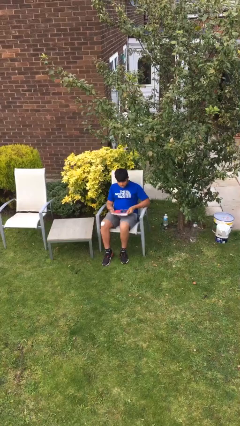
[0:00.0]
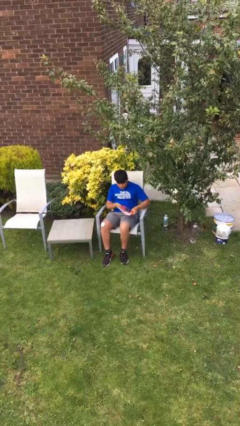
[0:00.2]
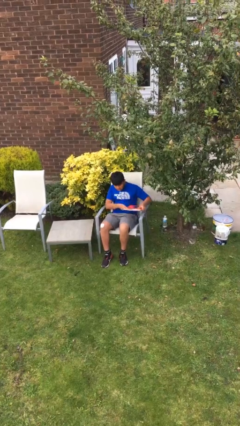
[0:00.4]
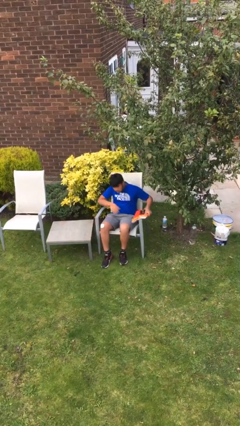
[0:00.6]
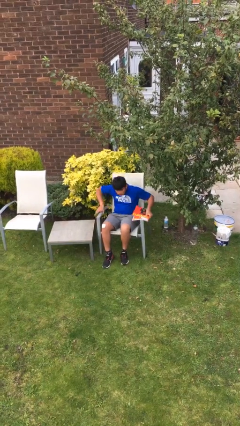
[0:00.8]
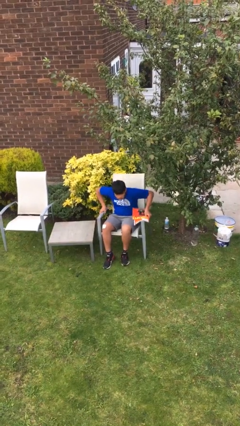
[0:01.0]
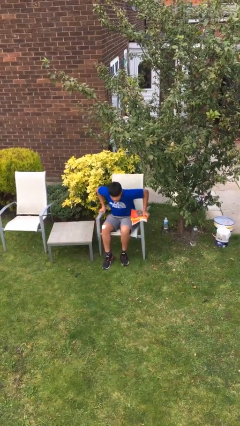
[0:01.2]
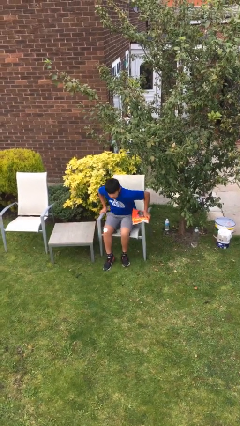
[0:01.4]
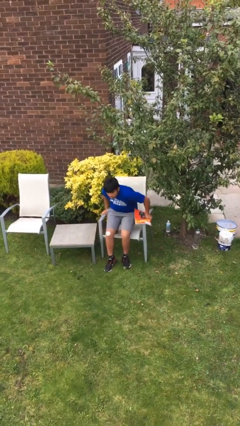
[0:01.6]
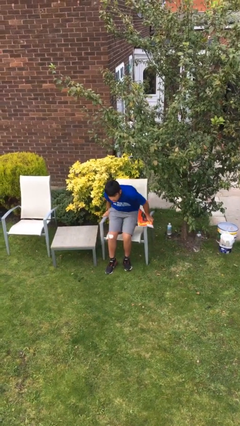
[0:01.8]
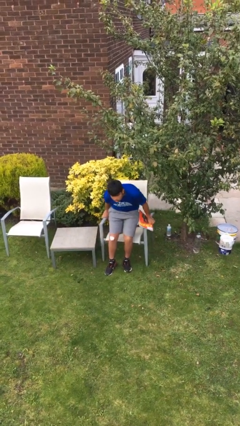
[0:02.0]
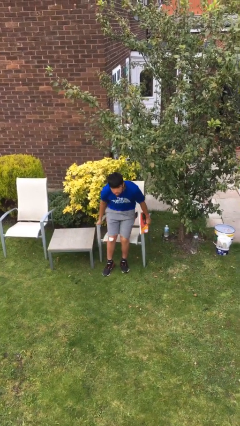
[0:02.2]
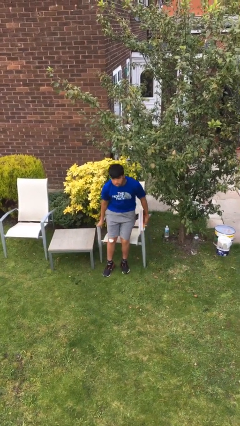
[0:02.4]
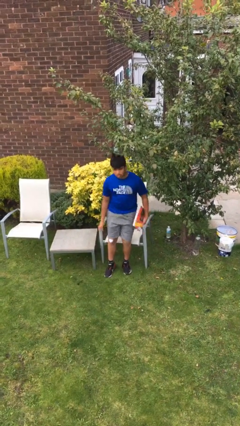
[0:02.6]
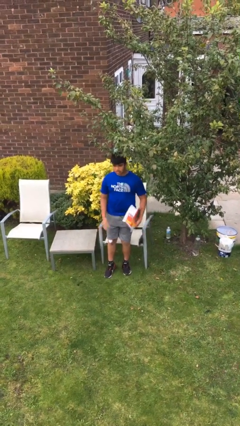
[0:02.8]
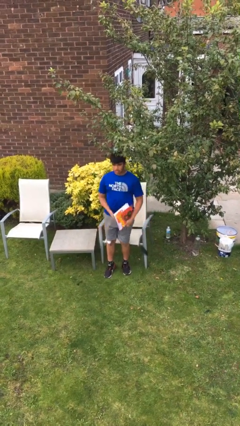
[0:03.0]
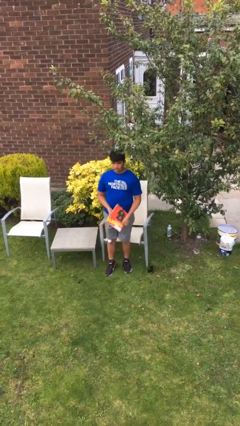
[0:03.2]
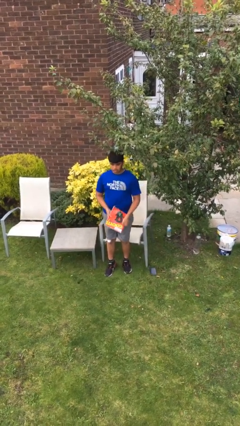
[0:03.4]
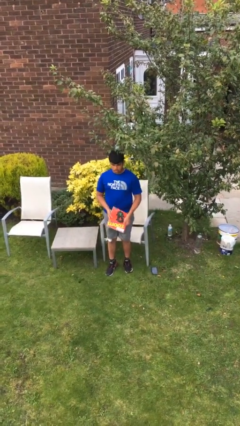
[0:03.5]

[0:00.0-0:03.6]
person stands up

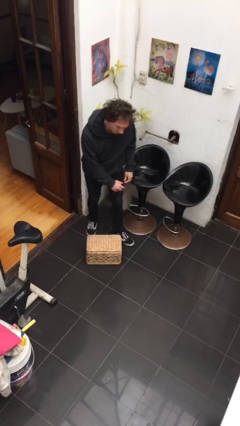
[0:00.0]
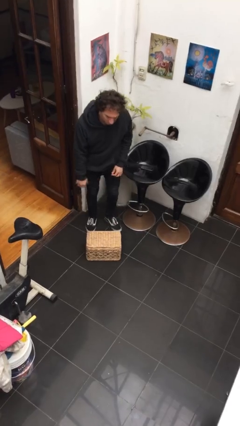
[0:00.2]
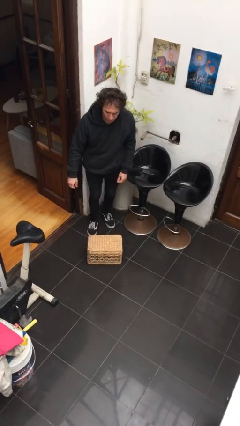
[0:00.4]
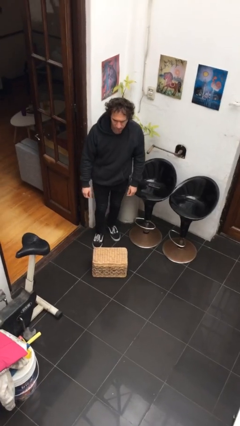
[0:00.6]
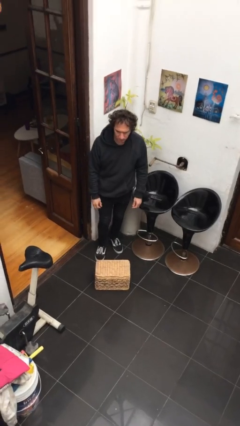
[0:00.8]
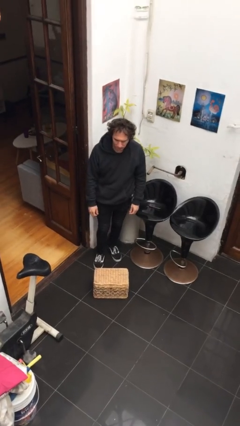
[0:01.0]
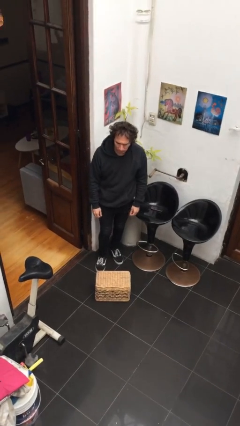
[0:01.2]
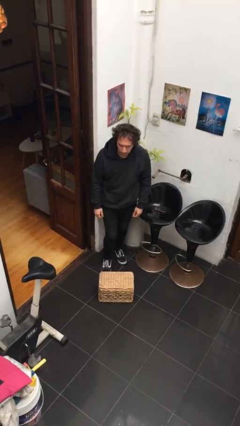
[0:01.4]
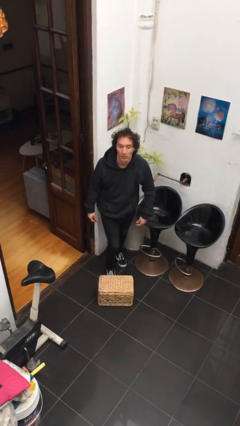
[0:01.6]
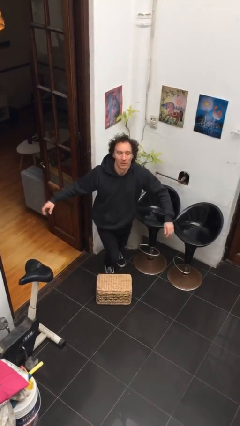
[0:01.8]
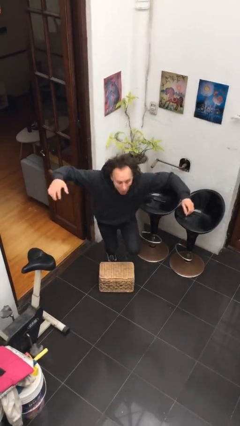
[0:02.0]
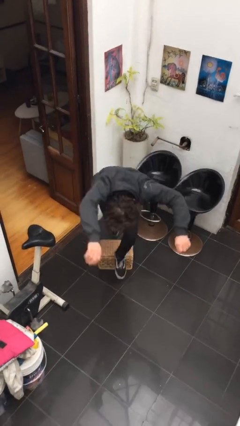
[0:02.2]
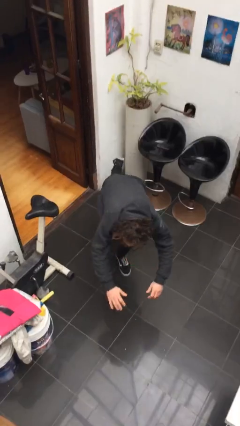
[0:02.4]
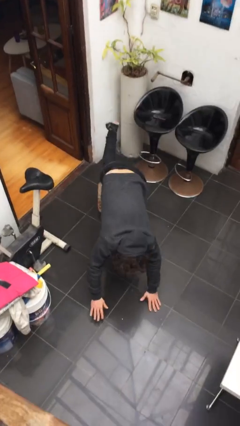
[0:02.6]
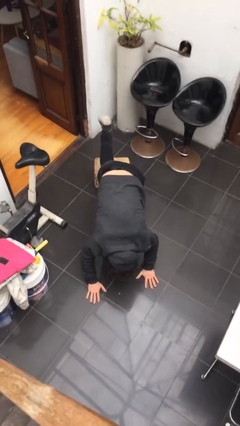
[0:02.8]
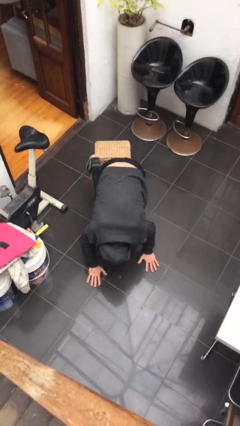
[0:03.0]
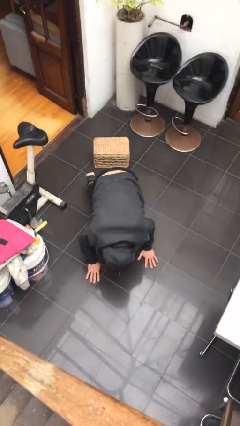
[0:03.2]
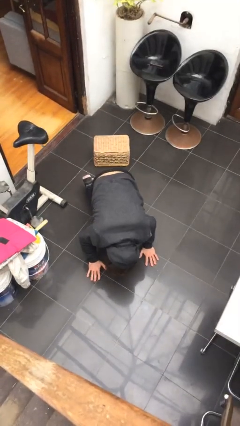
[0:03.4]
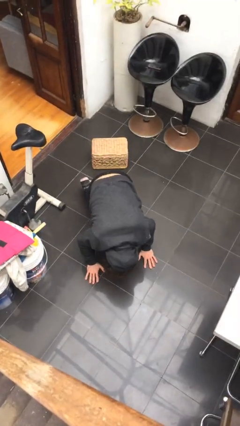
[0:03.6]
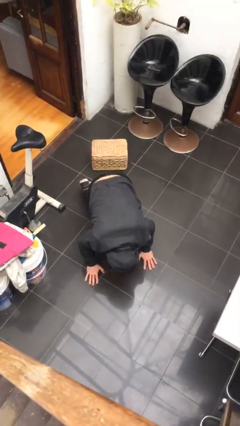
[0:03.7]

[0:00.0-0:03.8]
person trips on object on floor

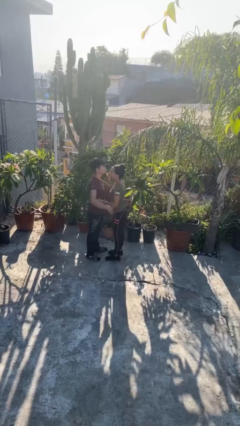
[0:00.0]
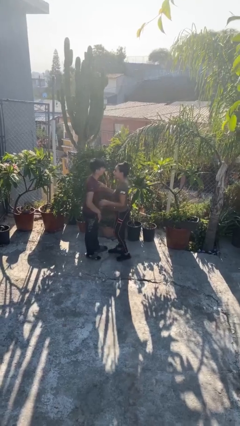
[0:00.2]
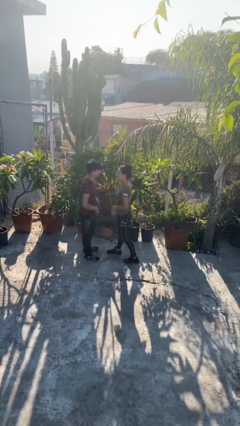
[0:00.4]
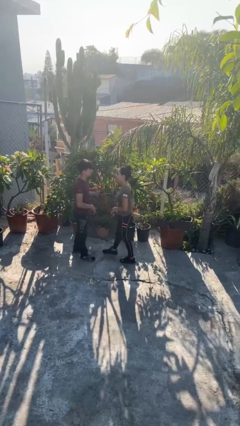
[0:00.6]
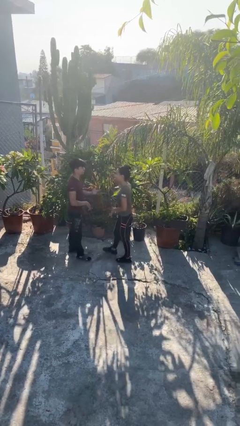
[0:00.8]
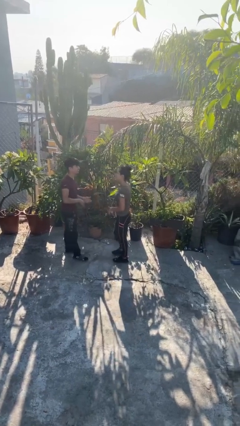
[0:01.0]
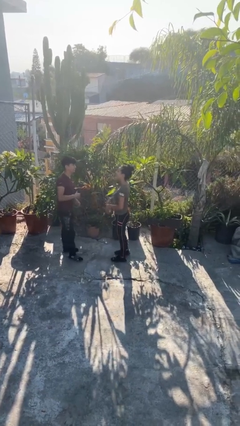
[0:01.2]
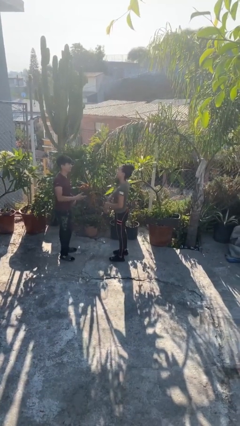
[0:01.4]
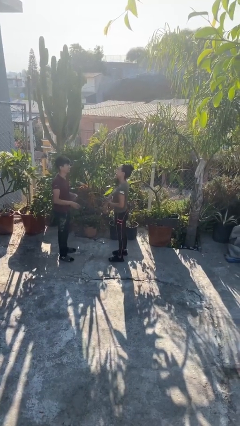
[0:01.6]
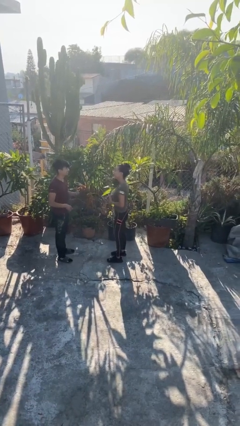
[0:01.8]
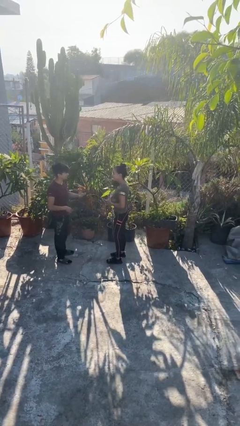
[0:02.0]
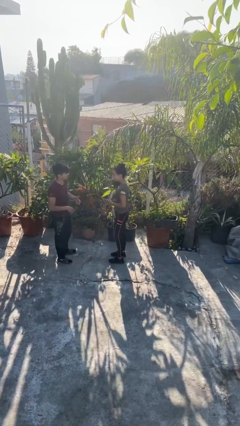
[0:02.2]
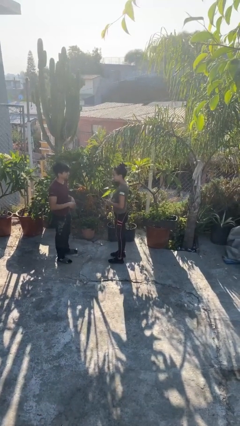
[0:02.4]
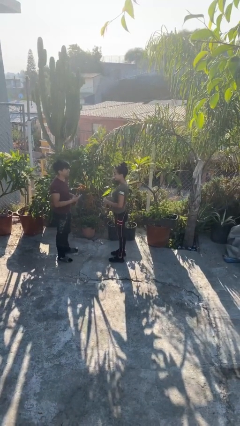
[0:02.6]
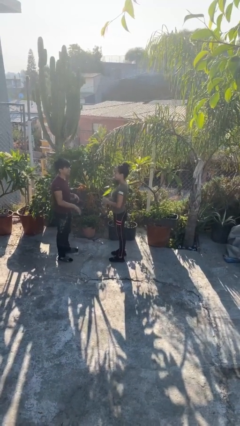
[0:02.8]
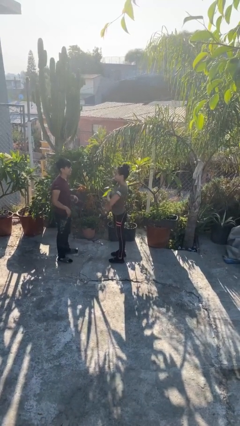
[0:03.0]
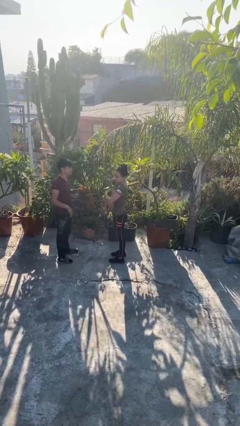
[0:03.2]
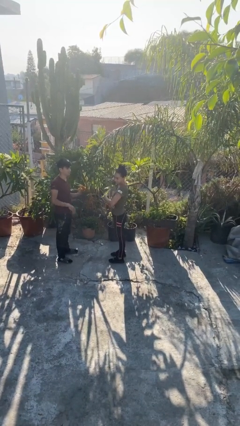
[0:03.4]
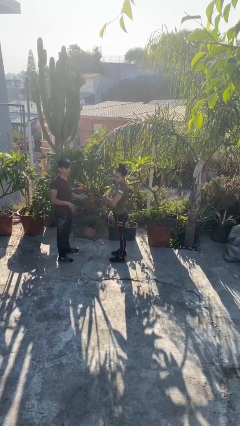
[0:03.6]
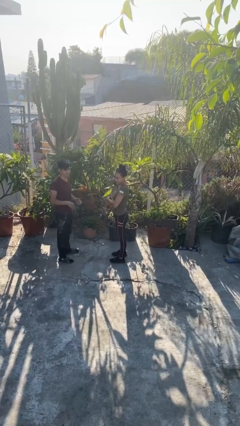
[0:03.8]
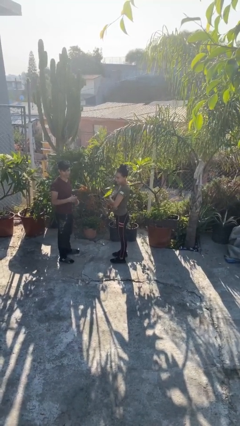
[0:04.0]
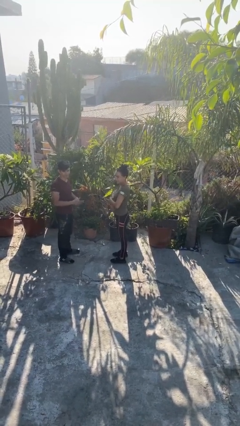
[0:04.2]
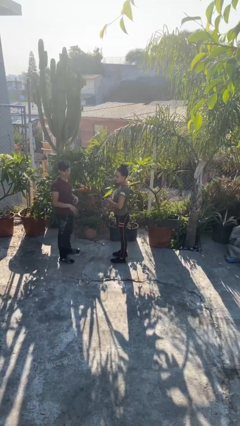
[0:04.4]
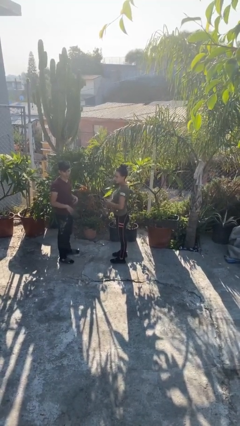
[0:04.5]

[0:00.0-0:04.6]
person talks to person

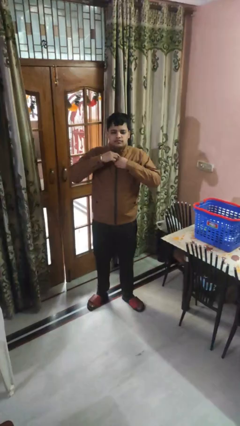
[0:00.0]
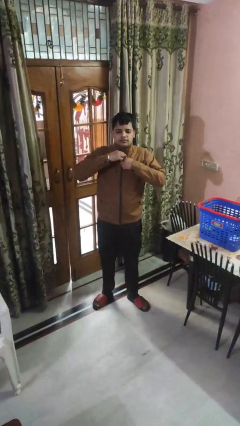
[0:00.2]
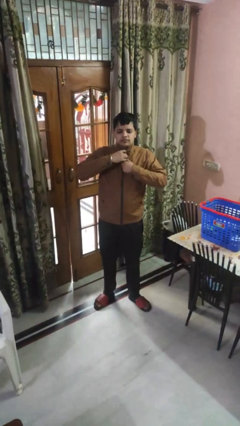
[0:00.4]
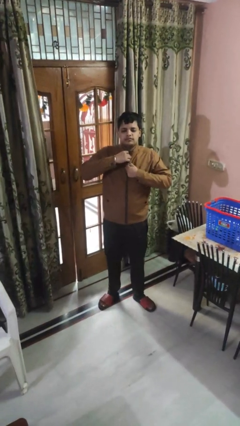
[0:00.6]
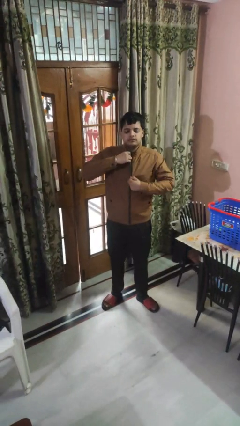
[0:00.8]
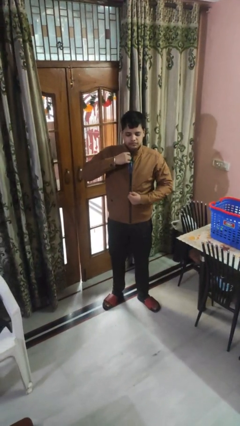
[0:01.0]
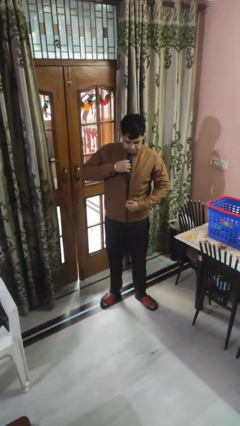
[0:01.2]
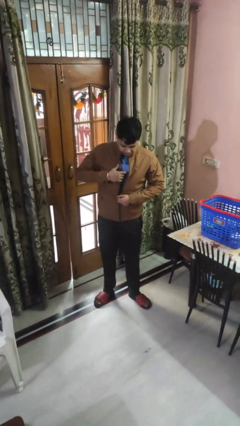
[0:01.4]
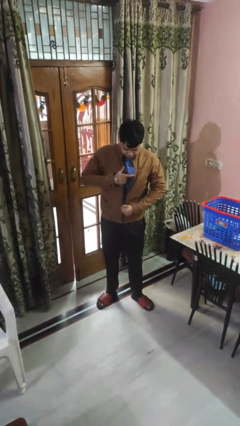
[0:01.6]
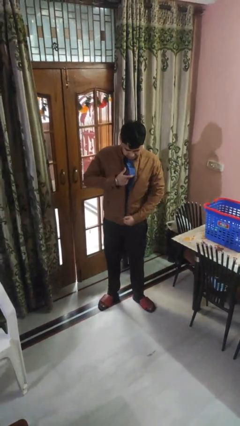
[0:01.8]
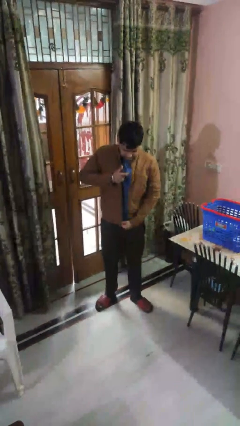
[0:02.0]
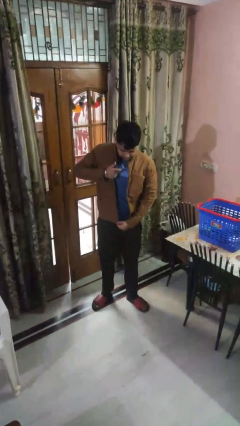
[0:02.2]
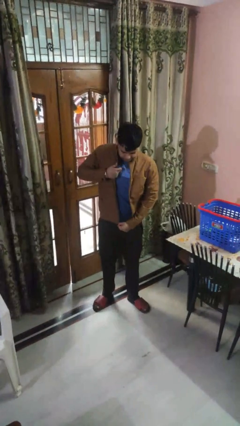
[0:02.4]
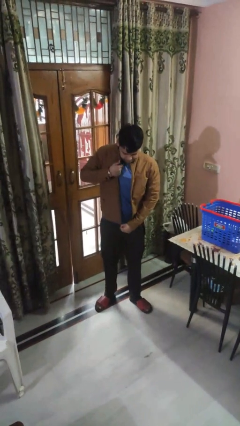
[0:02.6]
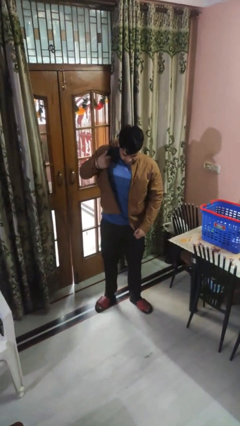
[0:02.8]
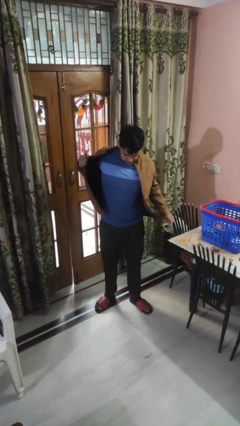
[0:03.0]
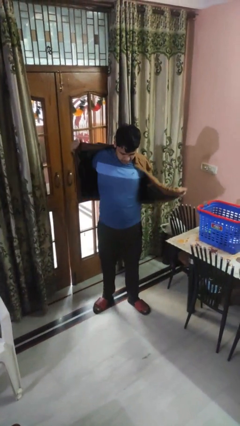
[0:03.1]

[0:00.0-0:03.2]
person unzips jacket

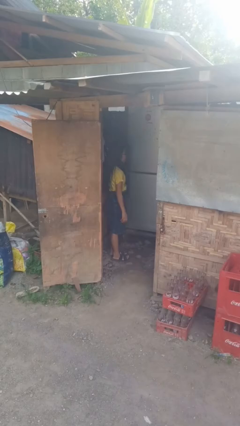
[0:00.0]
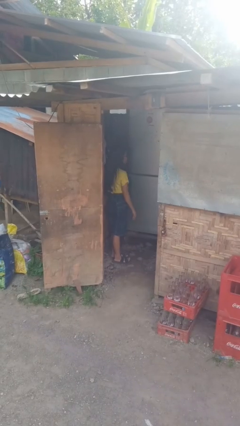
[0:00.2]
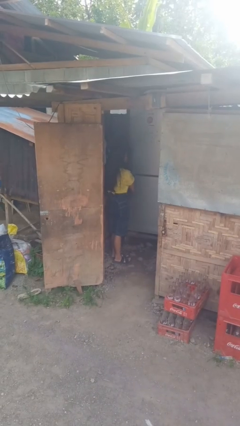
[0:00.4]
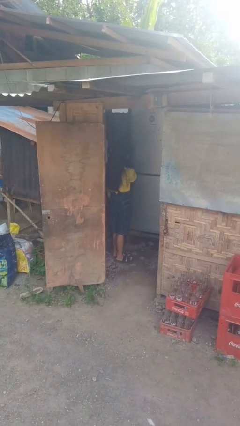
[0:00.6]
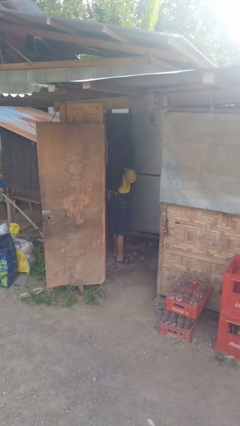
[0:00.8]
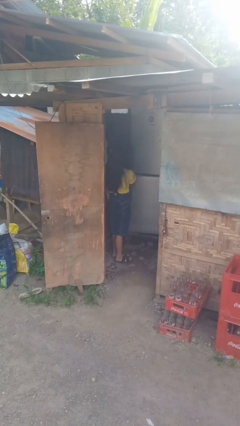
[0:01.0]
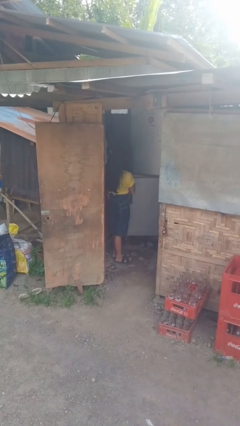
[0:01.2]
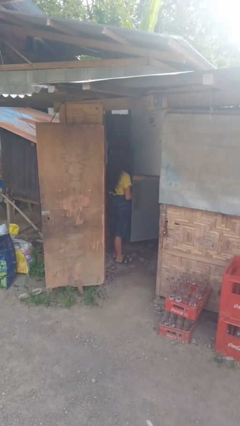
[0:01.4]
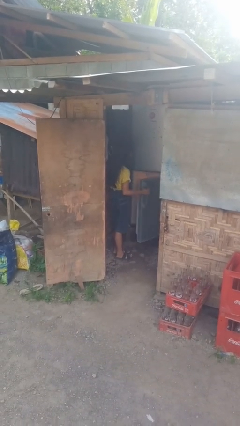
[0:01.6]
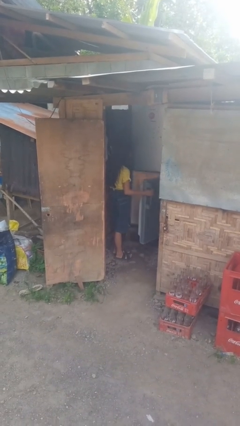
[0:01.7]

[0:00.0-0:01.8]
person opens refrigerator

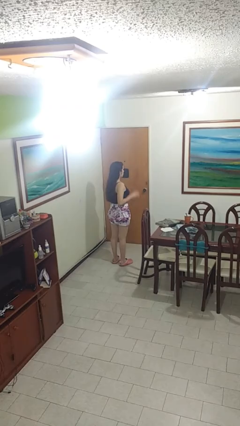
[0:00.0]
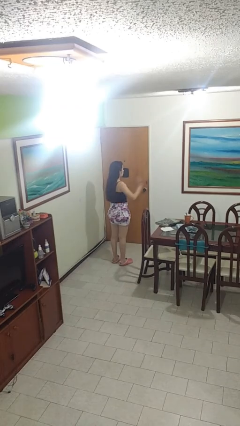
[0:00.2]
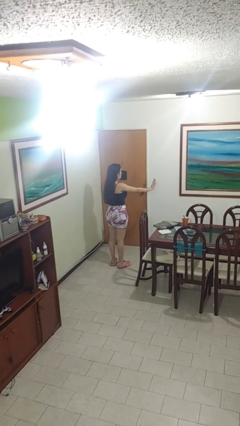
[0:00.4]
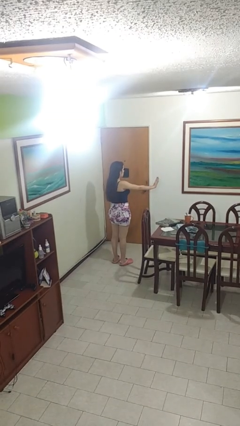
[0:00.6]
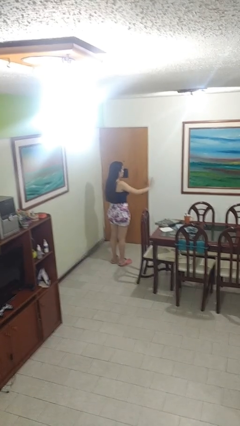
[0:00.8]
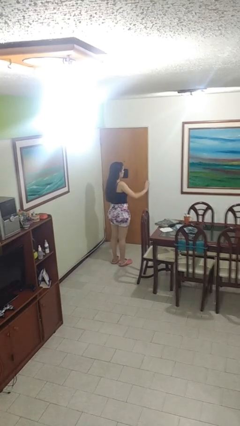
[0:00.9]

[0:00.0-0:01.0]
person gestures stop
